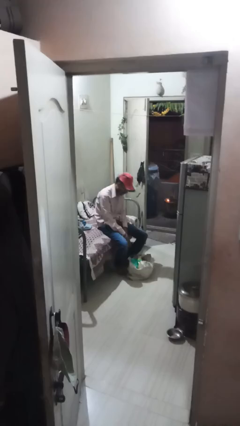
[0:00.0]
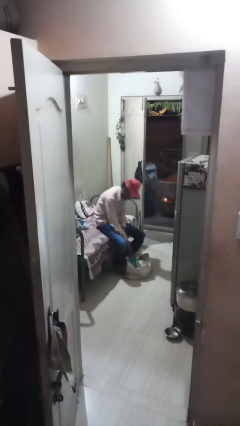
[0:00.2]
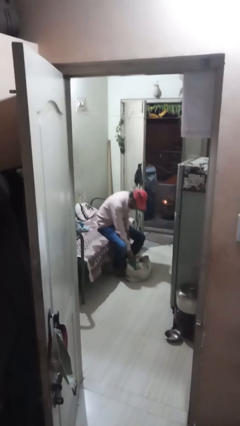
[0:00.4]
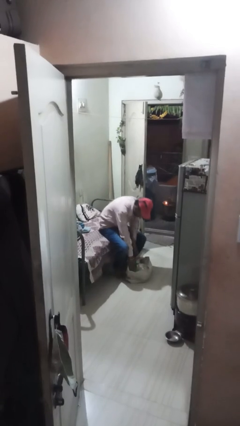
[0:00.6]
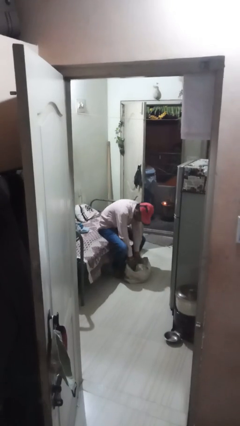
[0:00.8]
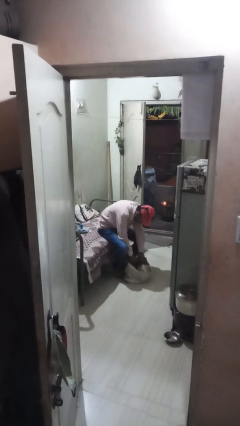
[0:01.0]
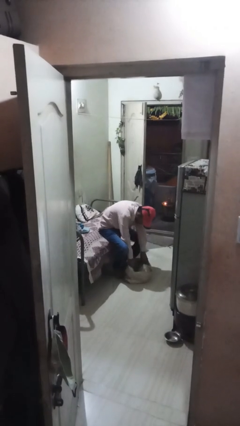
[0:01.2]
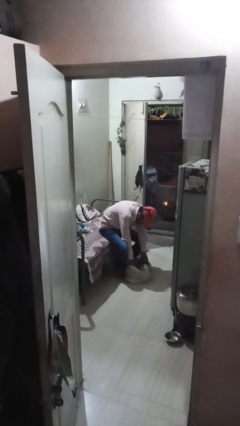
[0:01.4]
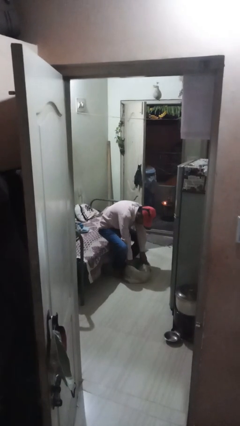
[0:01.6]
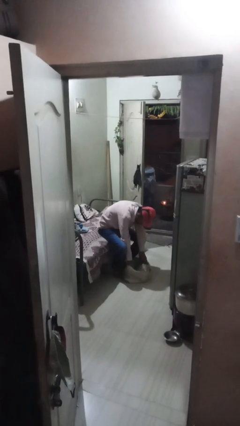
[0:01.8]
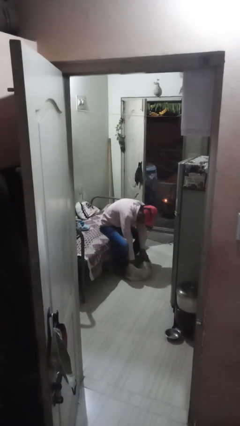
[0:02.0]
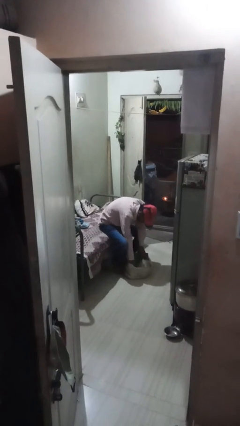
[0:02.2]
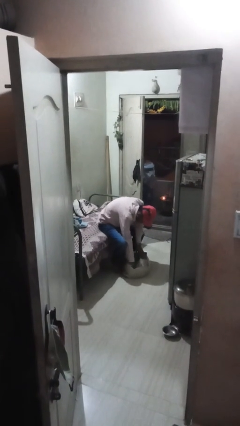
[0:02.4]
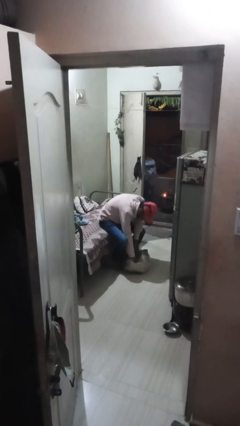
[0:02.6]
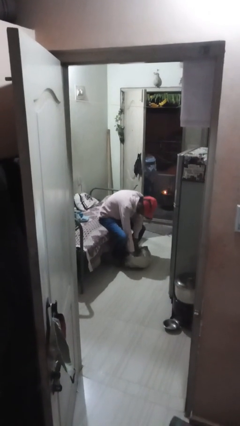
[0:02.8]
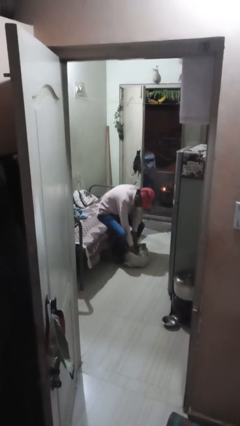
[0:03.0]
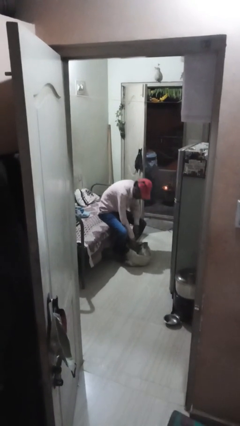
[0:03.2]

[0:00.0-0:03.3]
person searches in bag

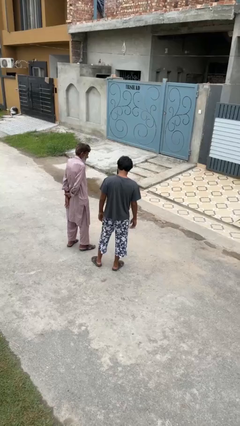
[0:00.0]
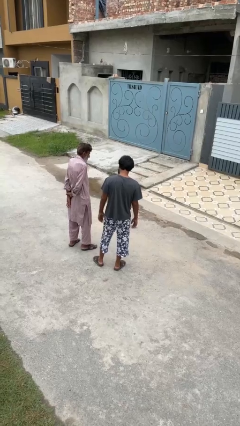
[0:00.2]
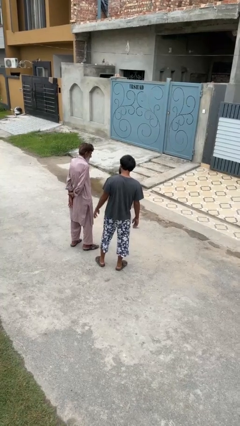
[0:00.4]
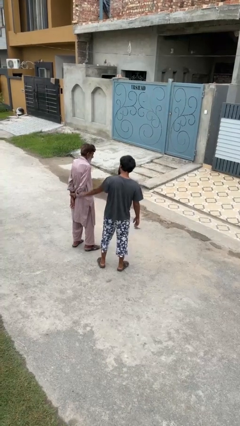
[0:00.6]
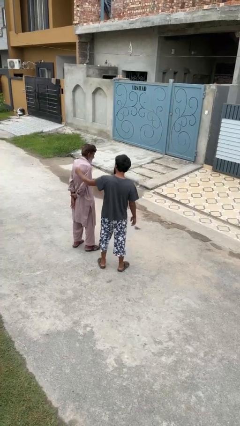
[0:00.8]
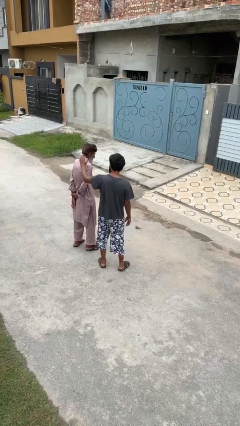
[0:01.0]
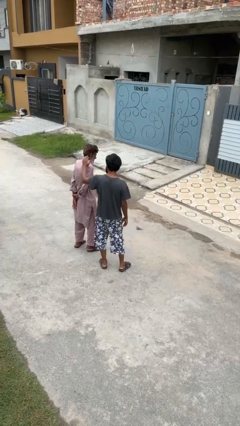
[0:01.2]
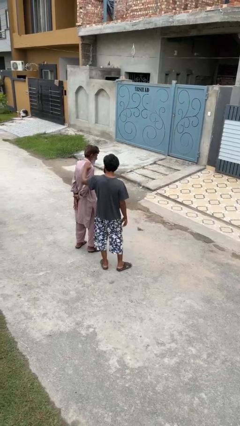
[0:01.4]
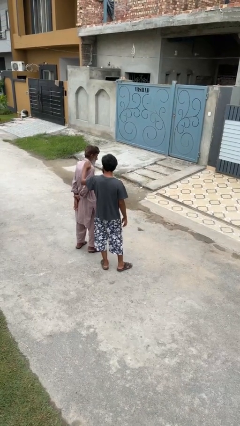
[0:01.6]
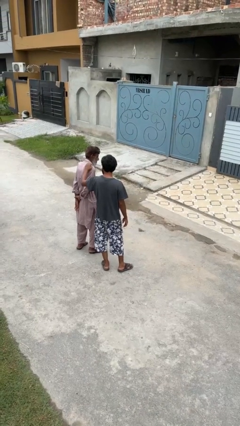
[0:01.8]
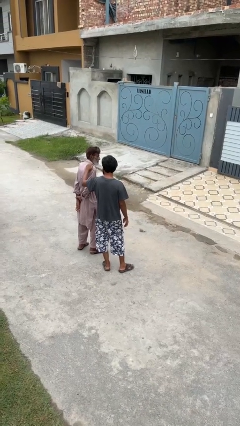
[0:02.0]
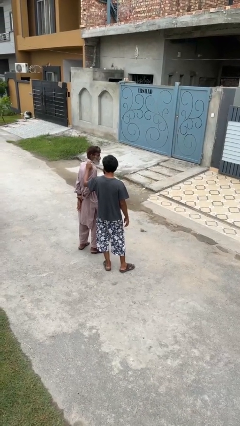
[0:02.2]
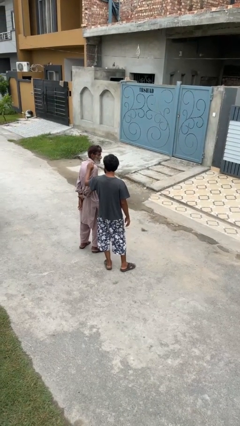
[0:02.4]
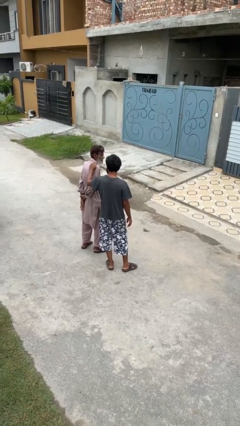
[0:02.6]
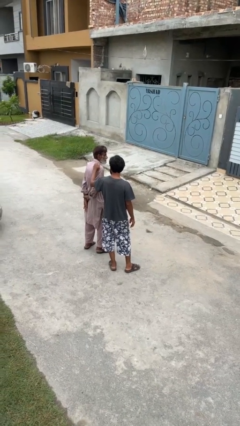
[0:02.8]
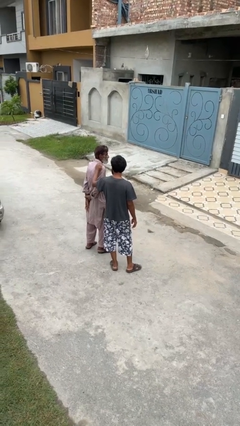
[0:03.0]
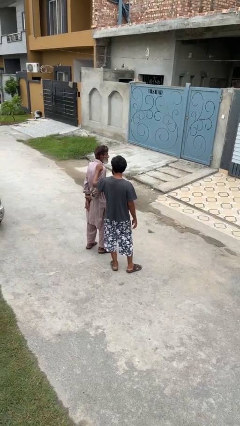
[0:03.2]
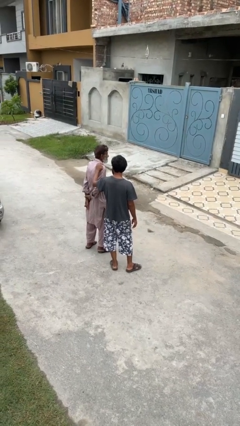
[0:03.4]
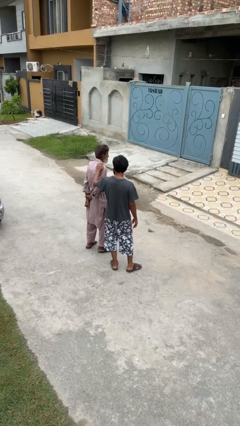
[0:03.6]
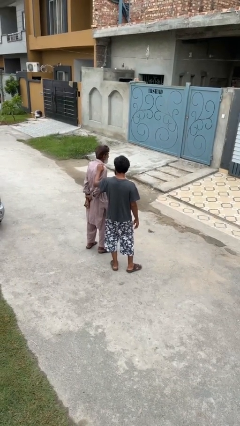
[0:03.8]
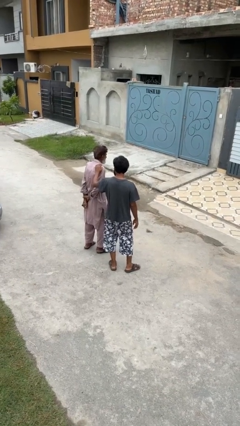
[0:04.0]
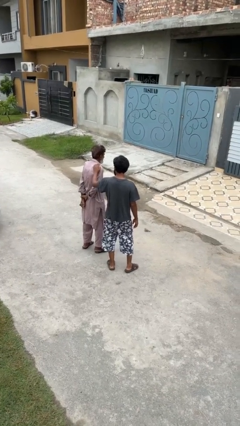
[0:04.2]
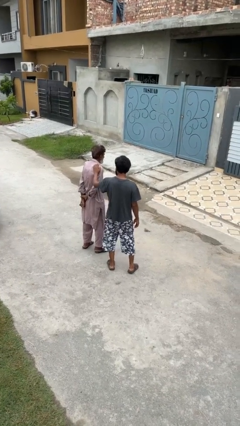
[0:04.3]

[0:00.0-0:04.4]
person pounds shoulders of person

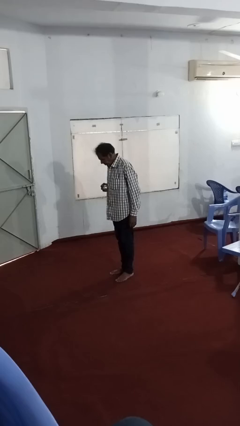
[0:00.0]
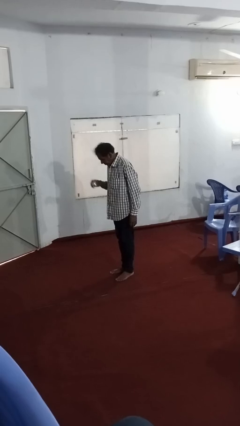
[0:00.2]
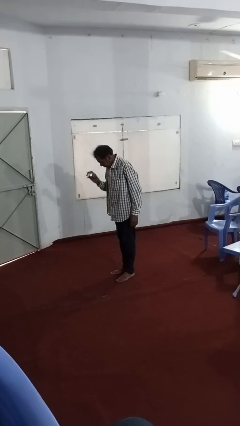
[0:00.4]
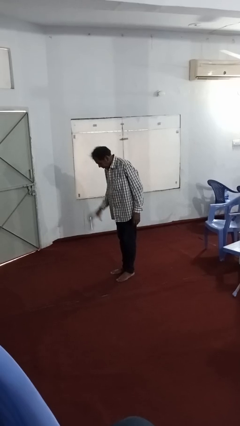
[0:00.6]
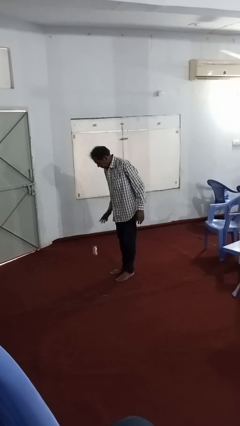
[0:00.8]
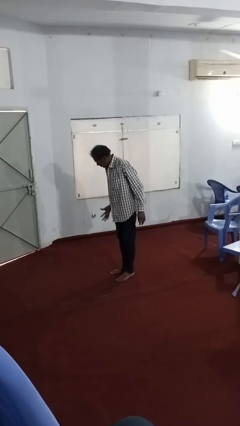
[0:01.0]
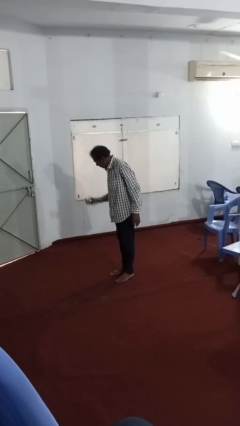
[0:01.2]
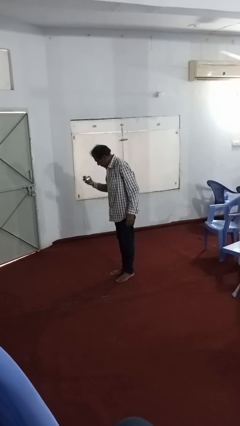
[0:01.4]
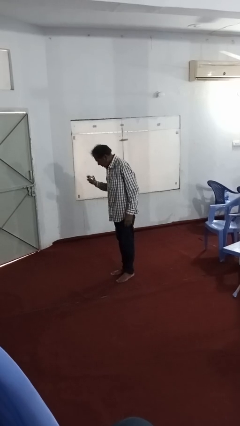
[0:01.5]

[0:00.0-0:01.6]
person bounces ball on floor

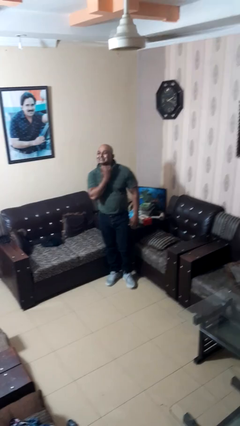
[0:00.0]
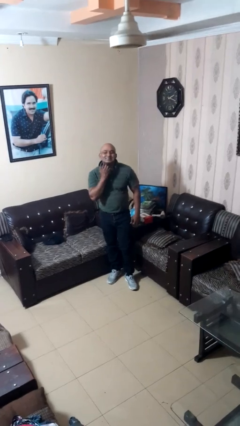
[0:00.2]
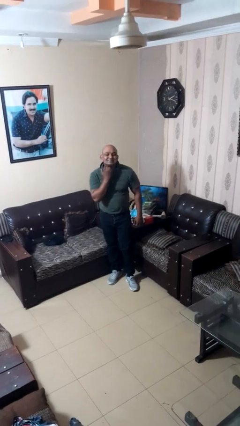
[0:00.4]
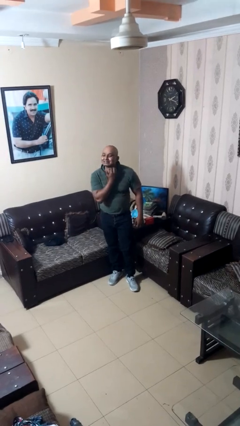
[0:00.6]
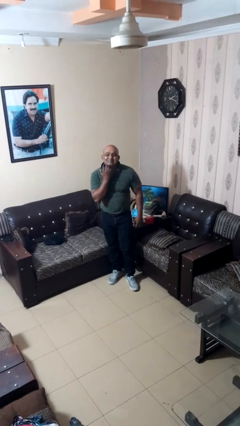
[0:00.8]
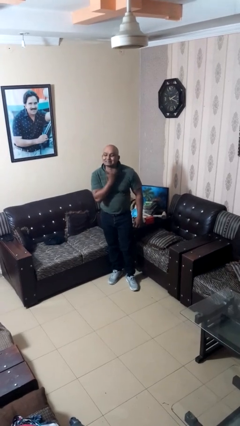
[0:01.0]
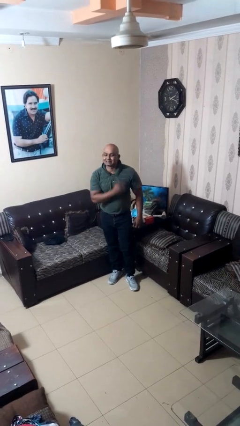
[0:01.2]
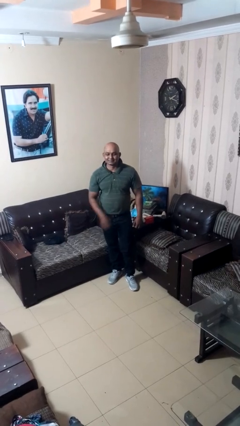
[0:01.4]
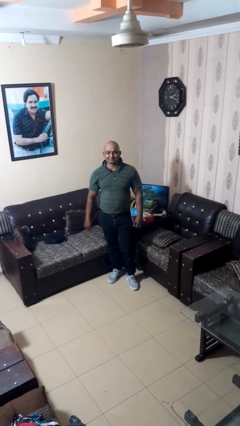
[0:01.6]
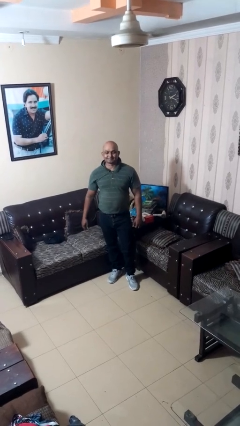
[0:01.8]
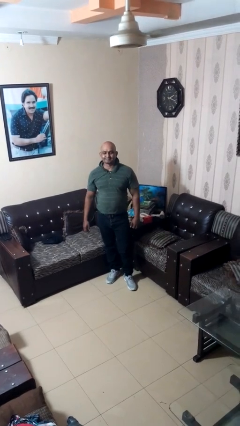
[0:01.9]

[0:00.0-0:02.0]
person gestures cut

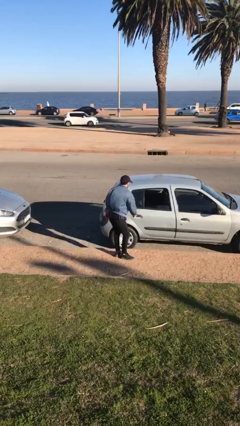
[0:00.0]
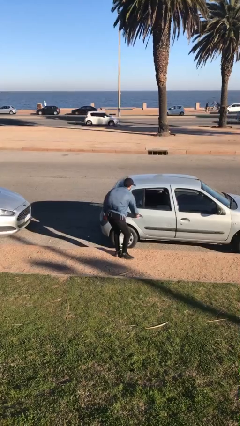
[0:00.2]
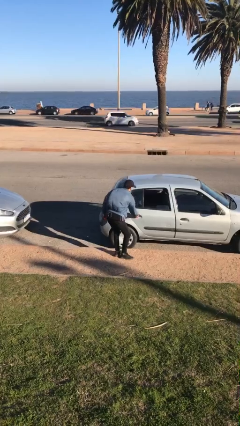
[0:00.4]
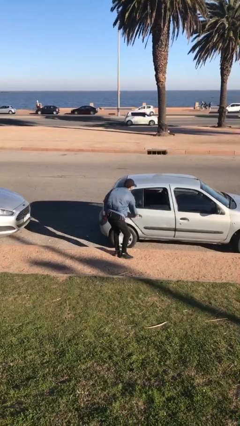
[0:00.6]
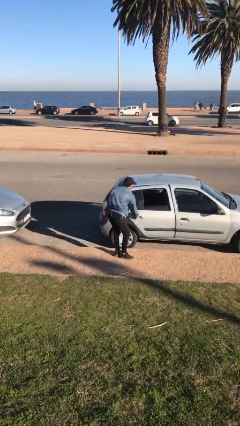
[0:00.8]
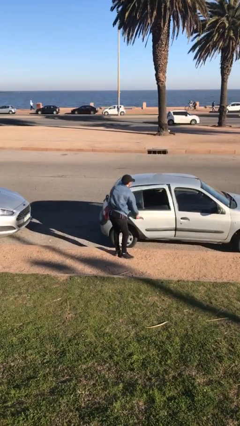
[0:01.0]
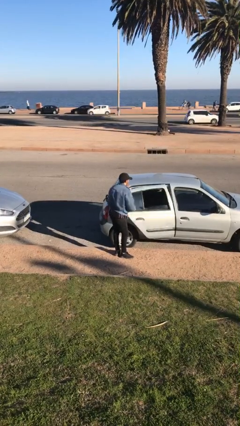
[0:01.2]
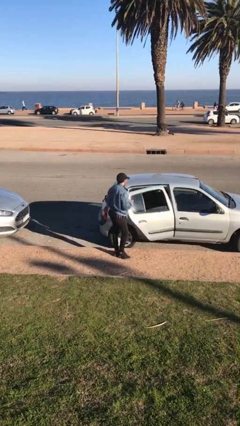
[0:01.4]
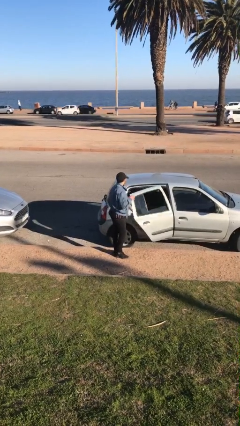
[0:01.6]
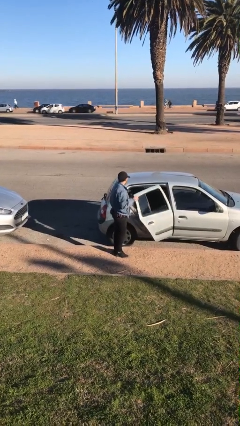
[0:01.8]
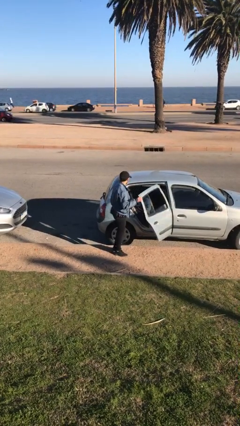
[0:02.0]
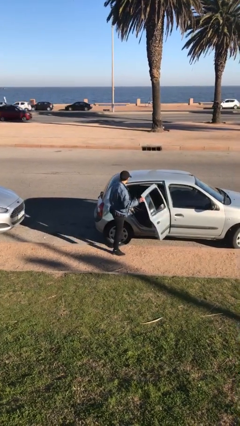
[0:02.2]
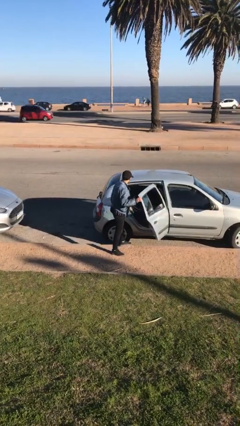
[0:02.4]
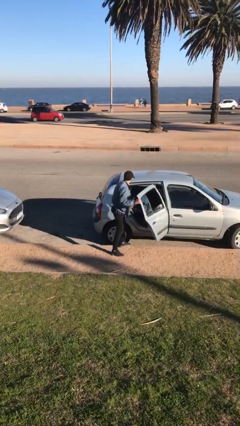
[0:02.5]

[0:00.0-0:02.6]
person opens car door

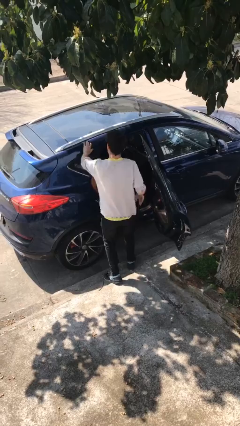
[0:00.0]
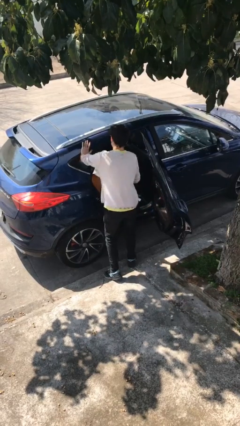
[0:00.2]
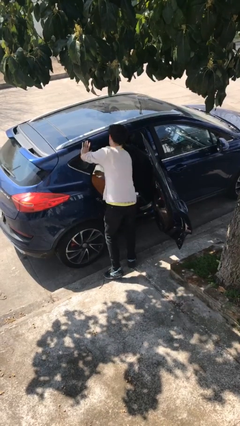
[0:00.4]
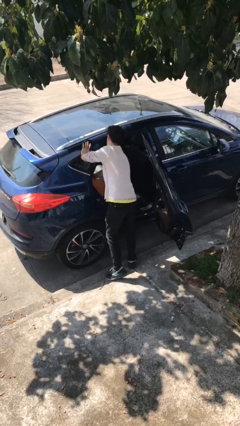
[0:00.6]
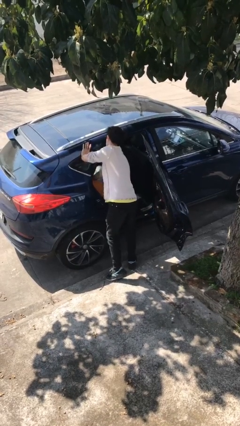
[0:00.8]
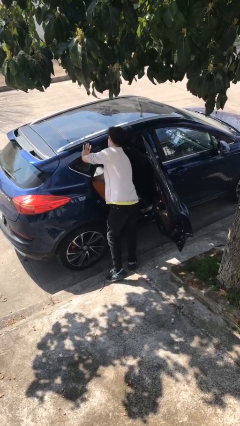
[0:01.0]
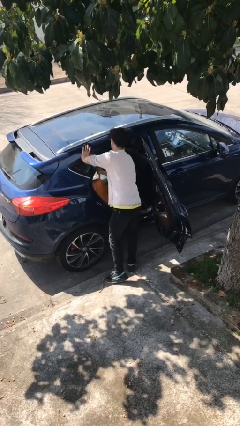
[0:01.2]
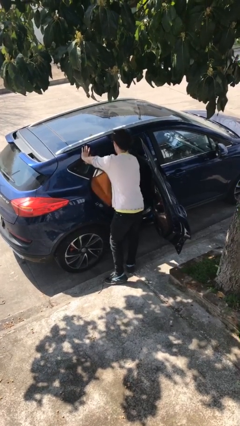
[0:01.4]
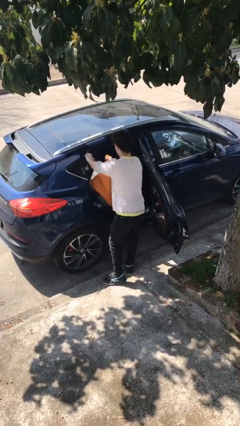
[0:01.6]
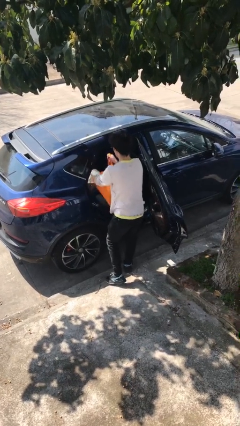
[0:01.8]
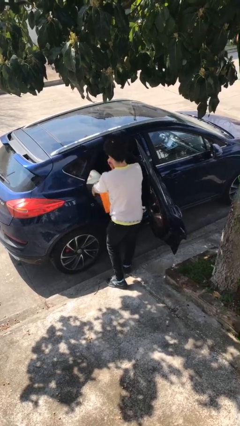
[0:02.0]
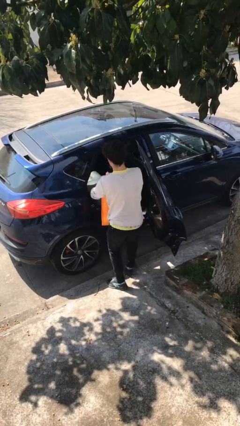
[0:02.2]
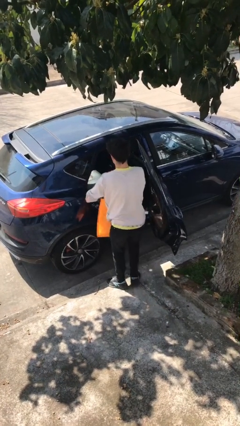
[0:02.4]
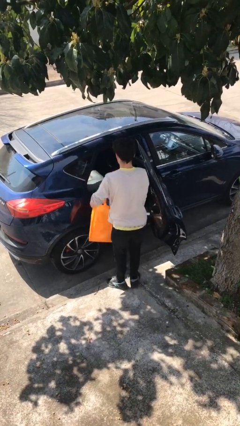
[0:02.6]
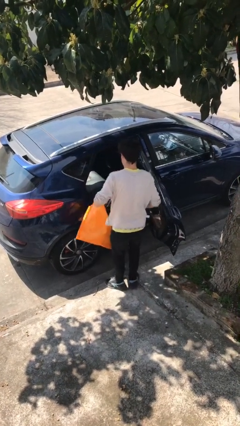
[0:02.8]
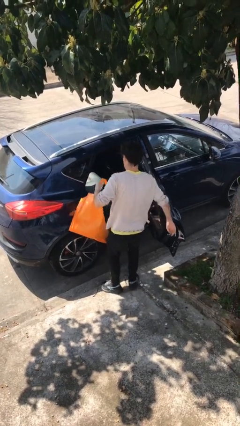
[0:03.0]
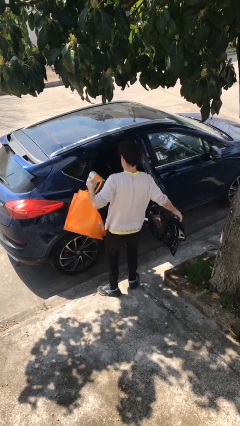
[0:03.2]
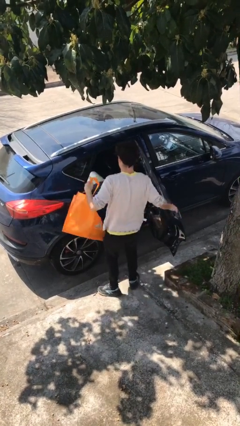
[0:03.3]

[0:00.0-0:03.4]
person unloads car
